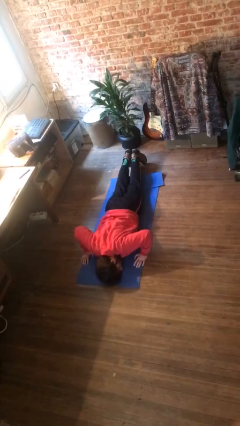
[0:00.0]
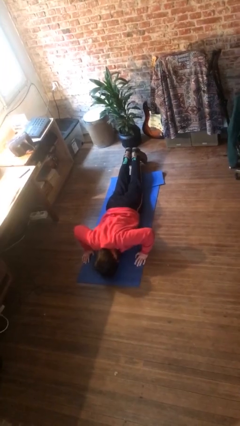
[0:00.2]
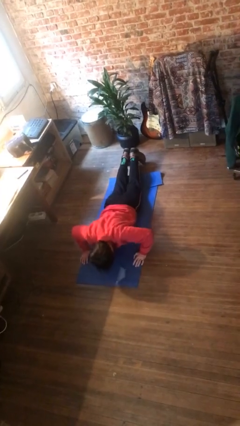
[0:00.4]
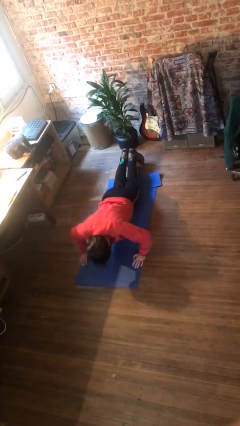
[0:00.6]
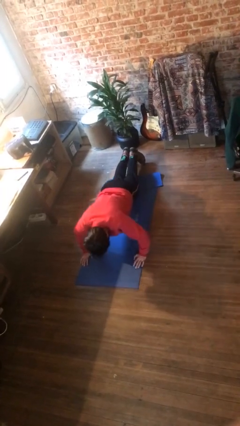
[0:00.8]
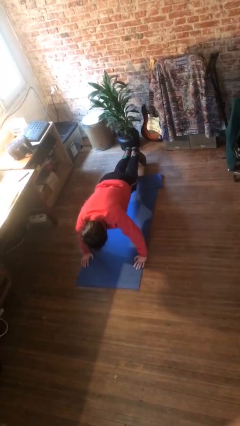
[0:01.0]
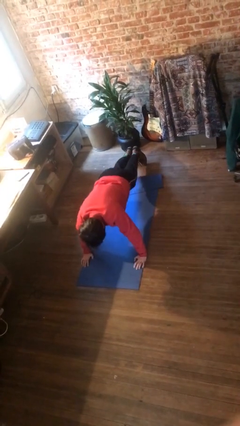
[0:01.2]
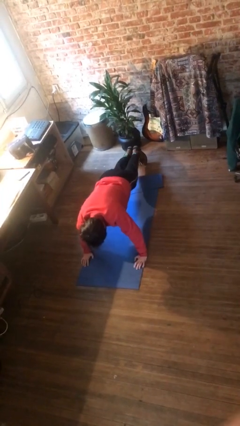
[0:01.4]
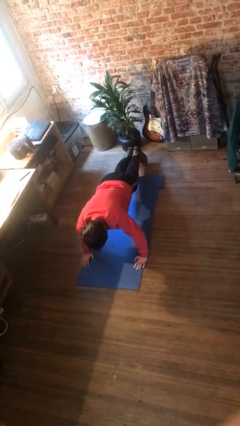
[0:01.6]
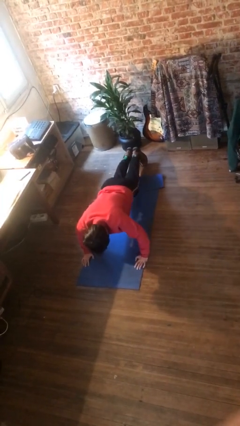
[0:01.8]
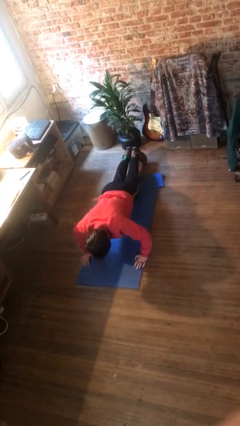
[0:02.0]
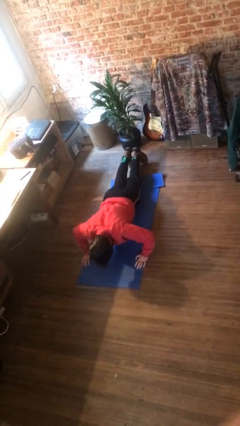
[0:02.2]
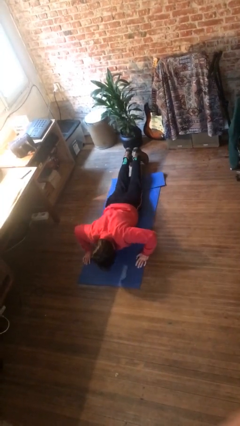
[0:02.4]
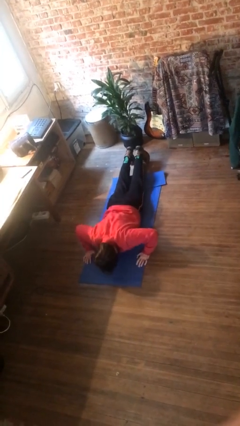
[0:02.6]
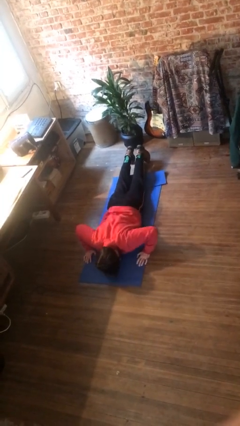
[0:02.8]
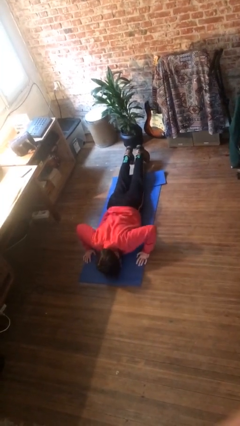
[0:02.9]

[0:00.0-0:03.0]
person exercises with pushup

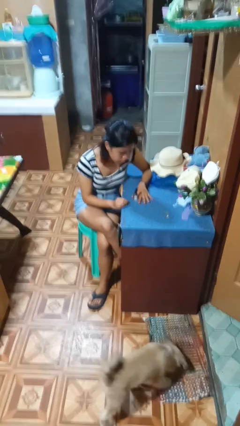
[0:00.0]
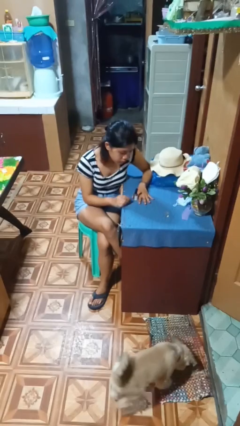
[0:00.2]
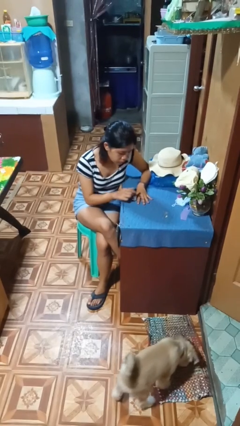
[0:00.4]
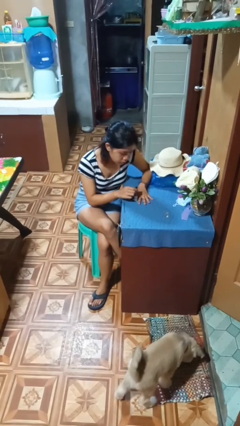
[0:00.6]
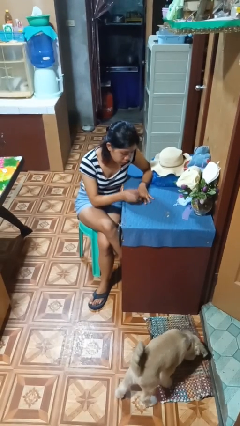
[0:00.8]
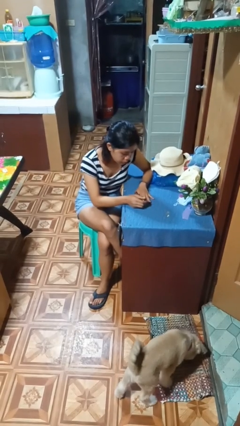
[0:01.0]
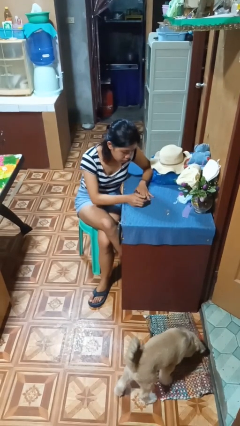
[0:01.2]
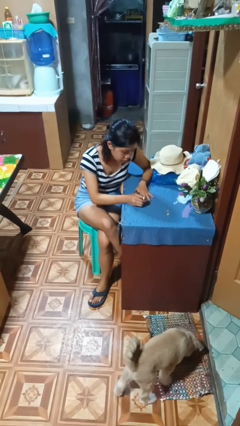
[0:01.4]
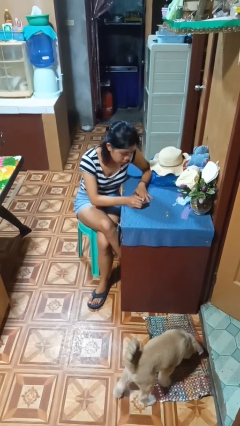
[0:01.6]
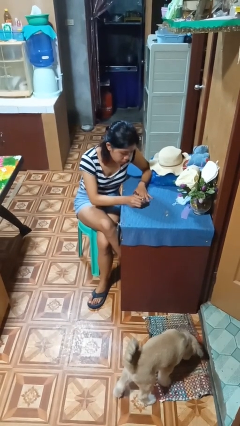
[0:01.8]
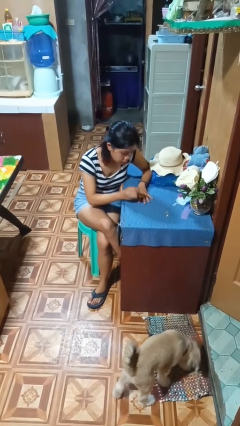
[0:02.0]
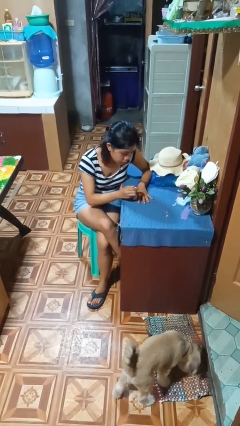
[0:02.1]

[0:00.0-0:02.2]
person paints fingernails

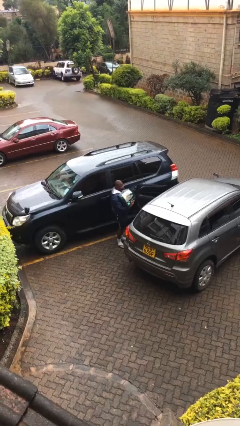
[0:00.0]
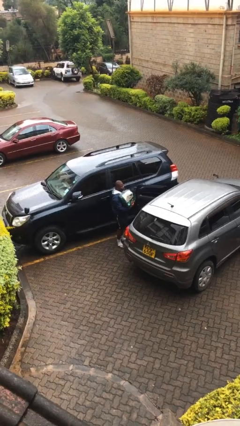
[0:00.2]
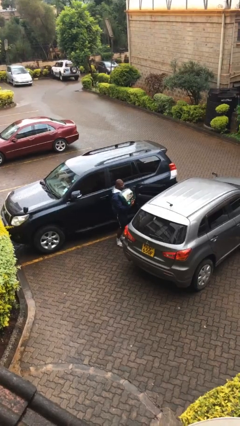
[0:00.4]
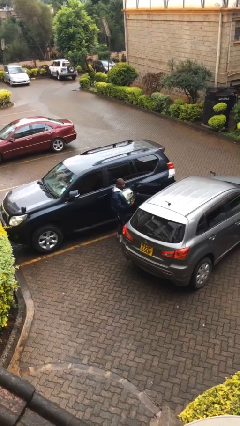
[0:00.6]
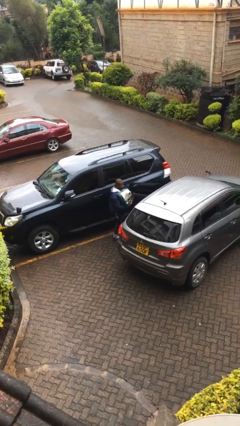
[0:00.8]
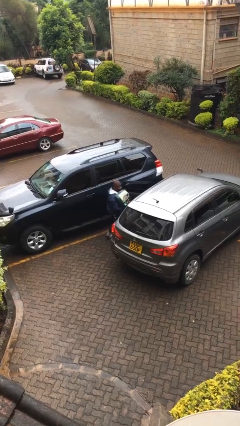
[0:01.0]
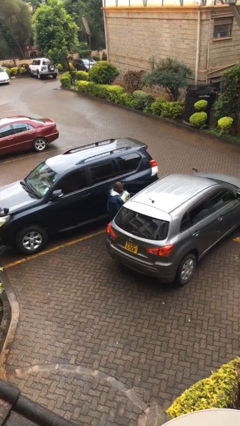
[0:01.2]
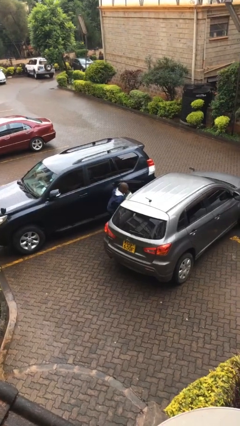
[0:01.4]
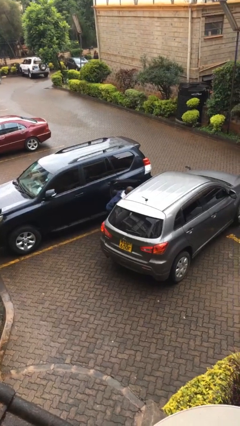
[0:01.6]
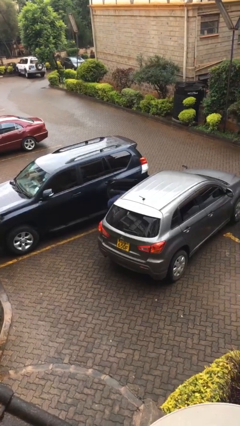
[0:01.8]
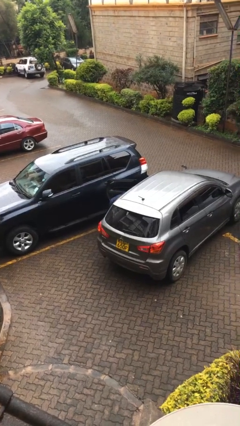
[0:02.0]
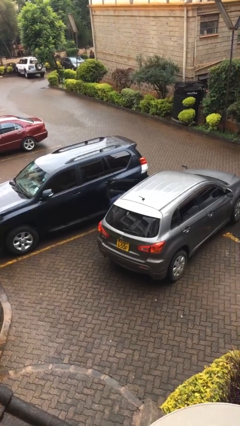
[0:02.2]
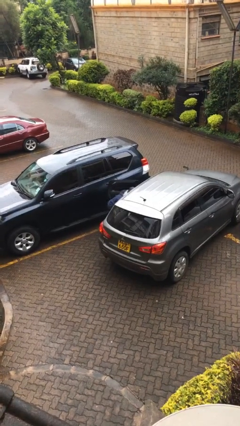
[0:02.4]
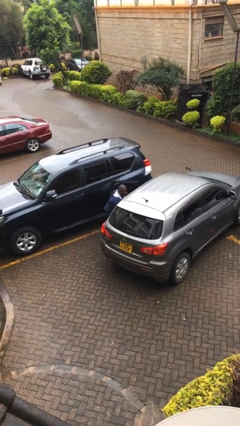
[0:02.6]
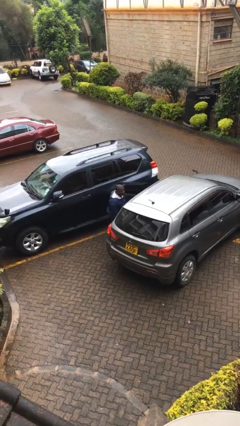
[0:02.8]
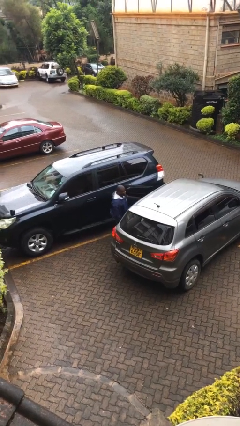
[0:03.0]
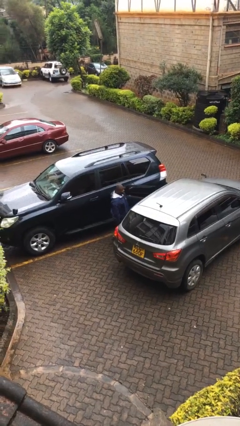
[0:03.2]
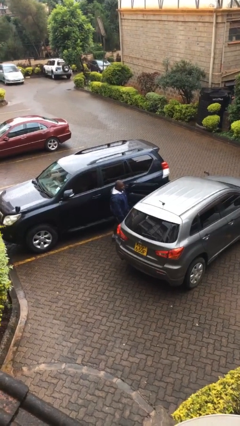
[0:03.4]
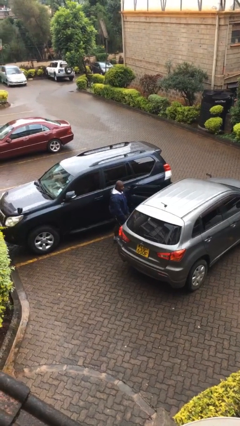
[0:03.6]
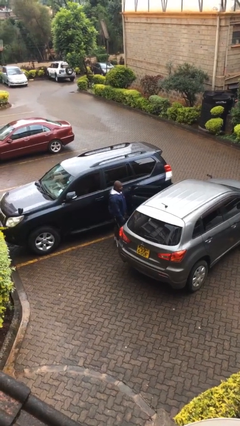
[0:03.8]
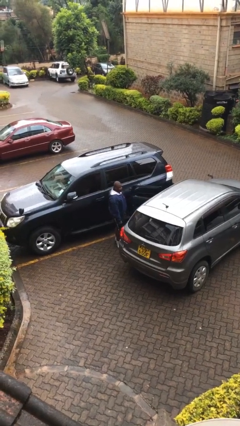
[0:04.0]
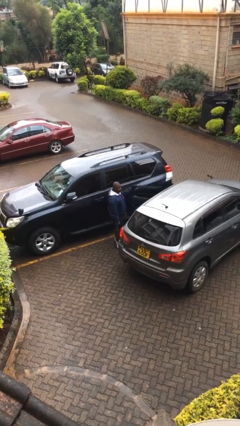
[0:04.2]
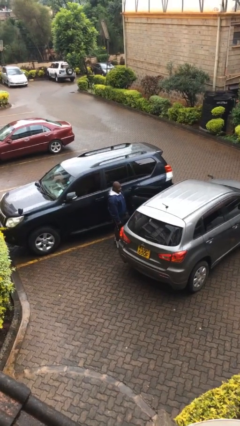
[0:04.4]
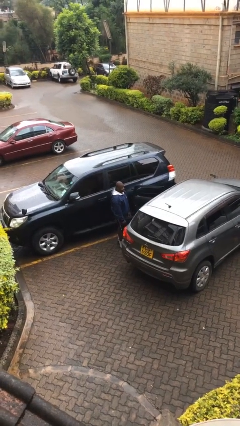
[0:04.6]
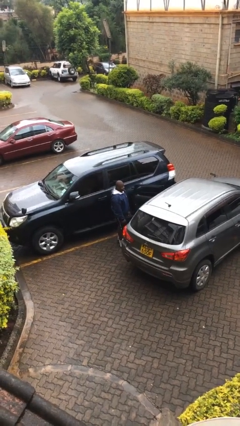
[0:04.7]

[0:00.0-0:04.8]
person loads car

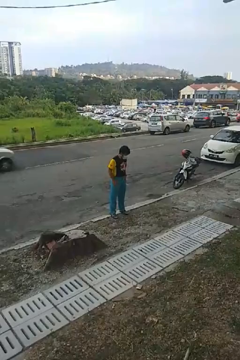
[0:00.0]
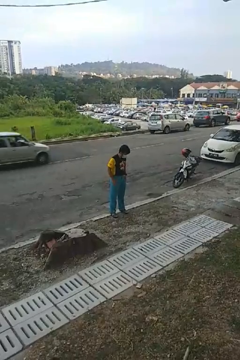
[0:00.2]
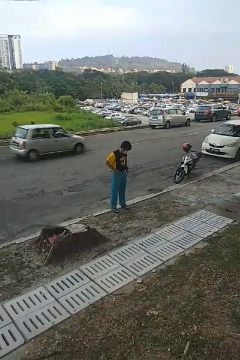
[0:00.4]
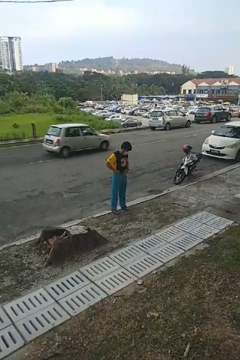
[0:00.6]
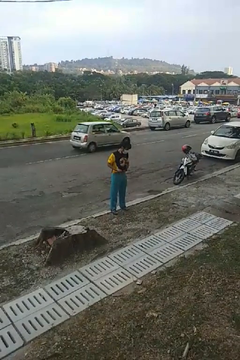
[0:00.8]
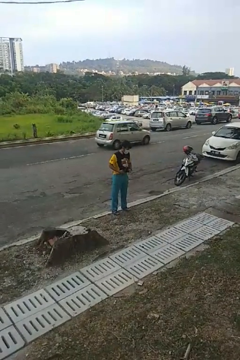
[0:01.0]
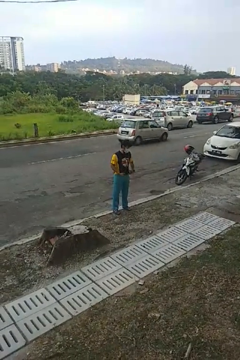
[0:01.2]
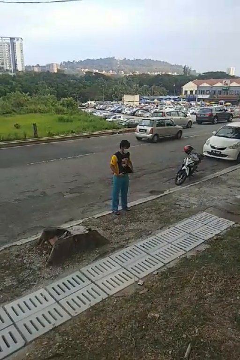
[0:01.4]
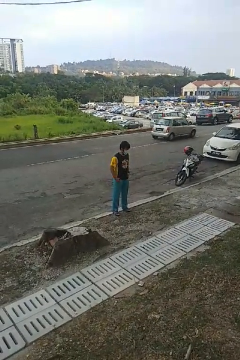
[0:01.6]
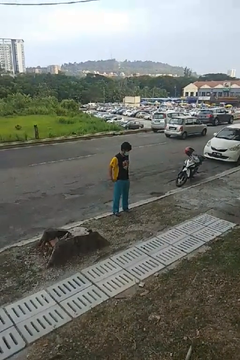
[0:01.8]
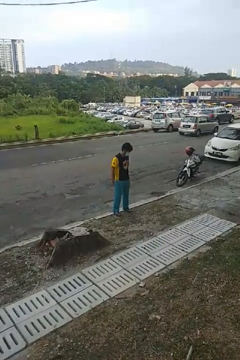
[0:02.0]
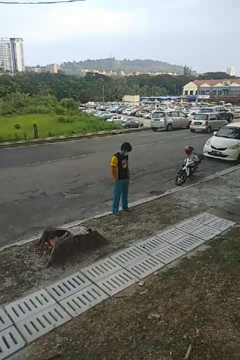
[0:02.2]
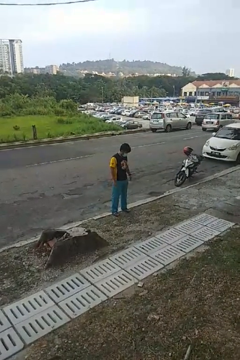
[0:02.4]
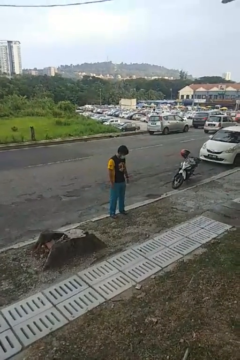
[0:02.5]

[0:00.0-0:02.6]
person untucks shirt

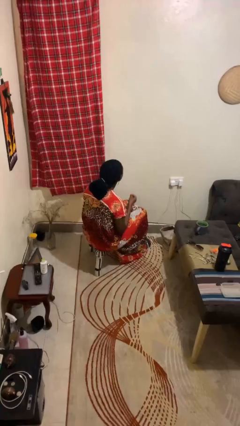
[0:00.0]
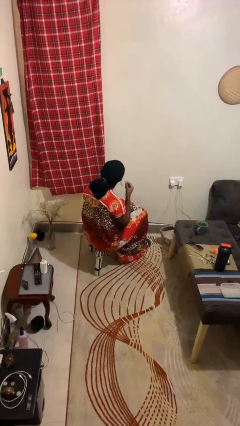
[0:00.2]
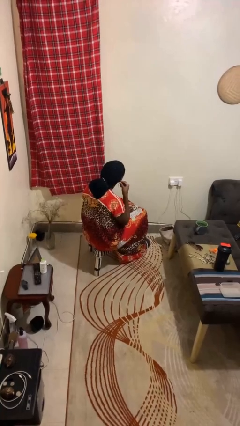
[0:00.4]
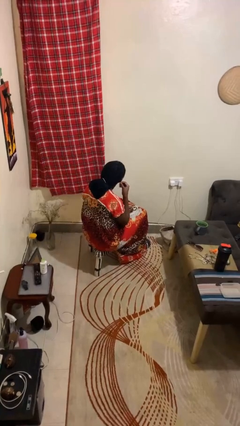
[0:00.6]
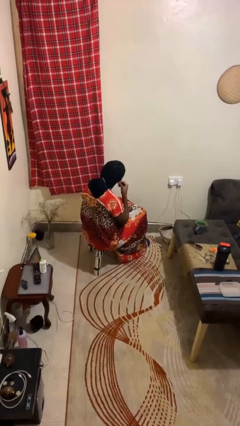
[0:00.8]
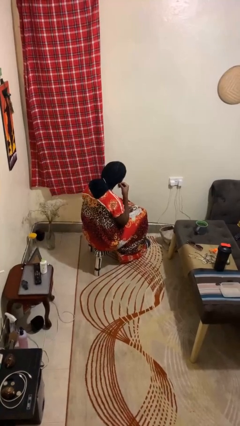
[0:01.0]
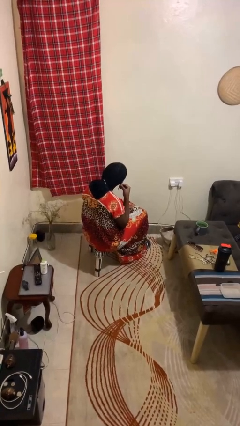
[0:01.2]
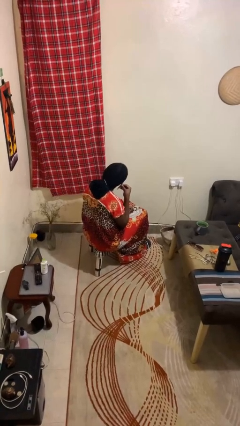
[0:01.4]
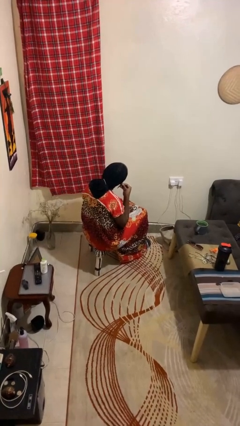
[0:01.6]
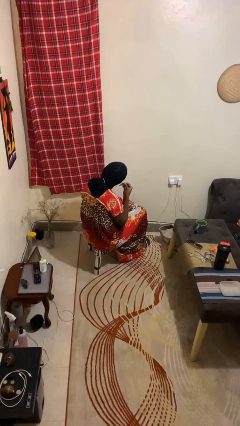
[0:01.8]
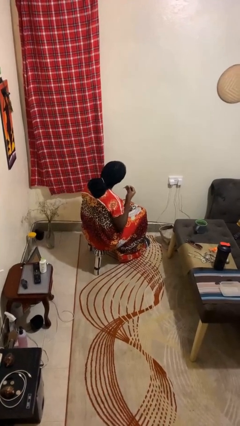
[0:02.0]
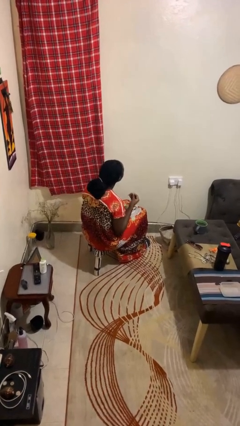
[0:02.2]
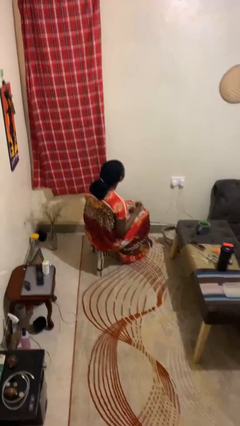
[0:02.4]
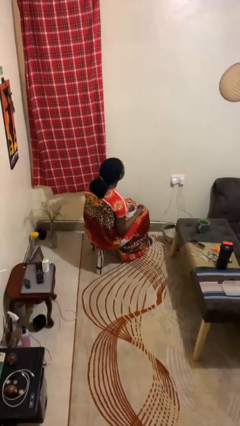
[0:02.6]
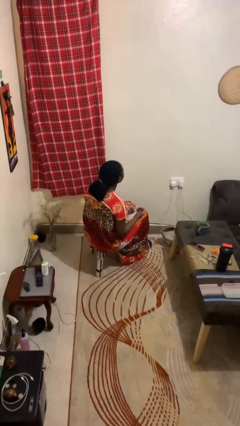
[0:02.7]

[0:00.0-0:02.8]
person takes off earrings

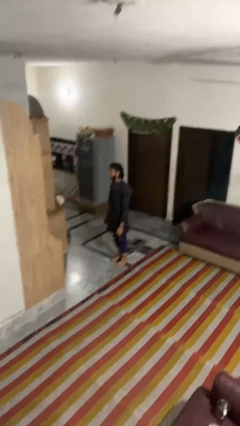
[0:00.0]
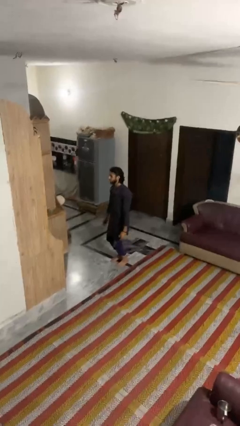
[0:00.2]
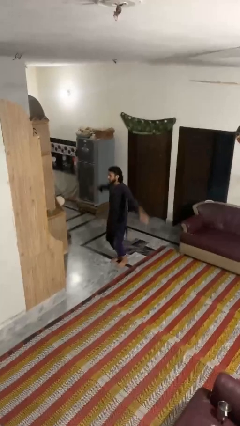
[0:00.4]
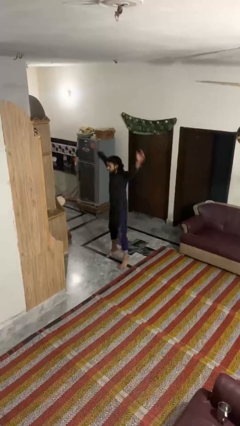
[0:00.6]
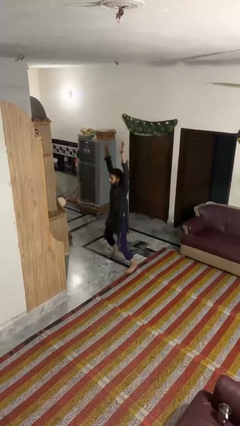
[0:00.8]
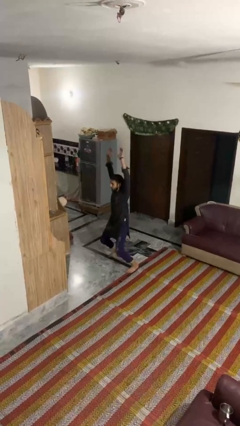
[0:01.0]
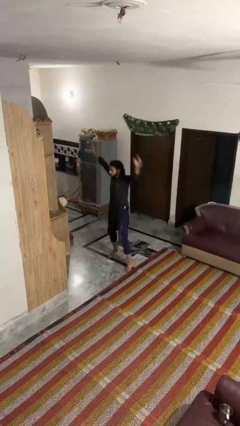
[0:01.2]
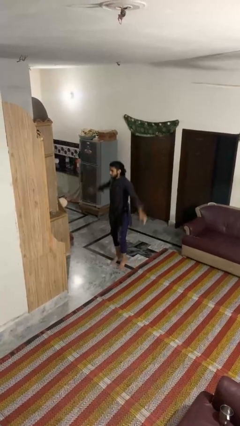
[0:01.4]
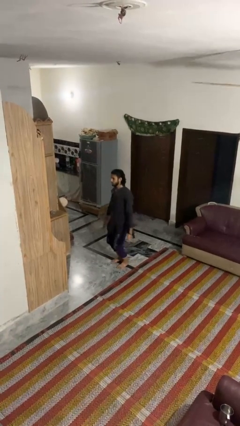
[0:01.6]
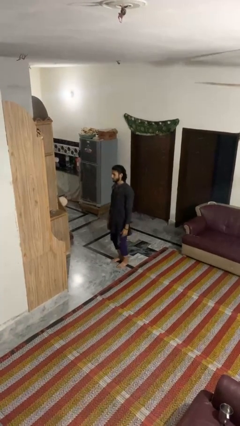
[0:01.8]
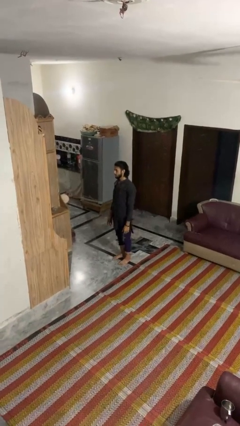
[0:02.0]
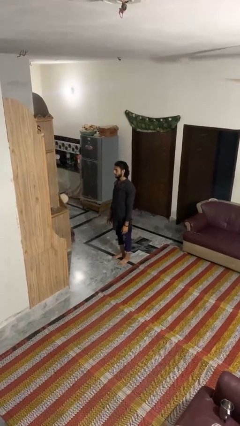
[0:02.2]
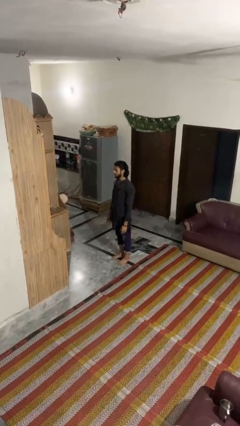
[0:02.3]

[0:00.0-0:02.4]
person exercises with jumping jacks

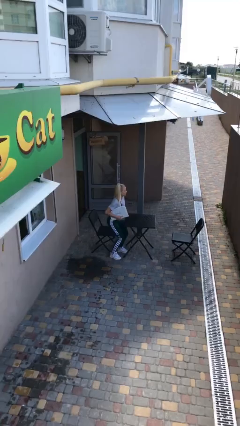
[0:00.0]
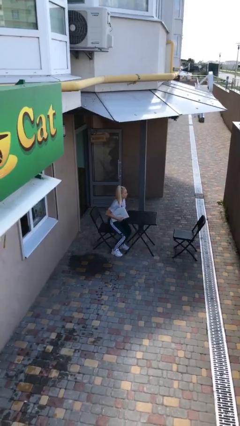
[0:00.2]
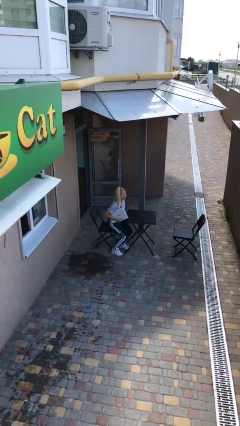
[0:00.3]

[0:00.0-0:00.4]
person sits down
